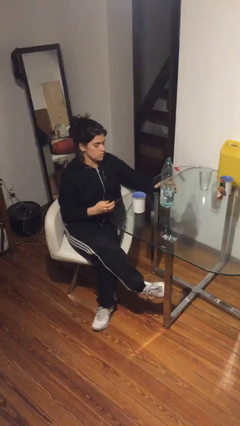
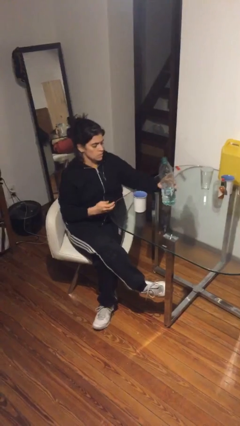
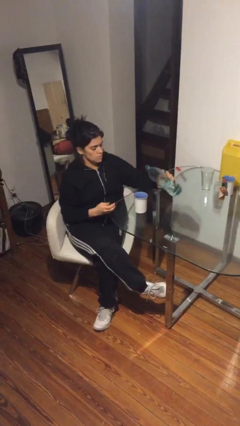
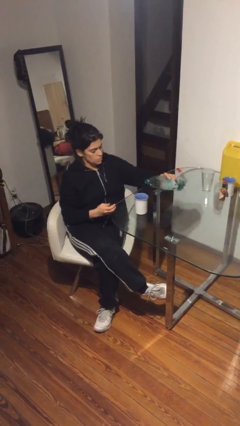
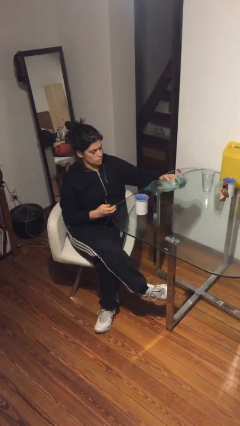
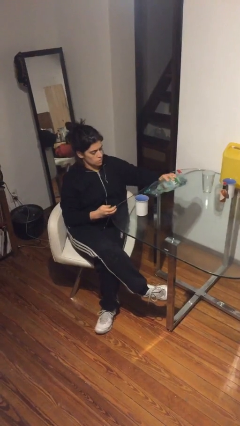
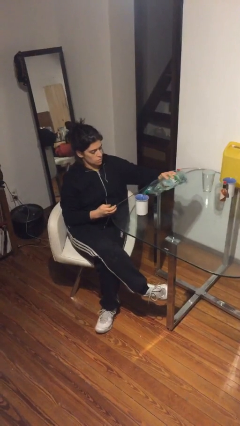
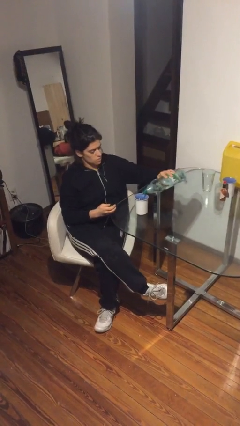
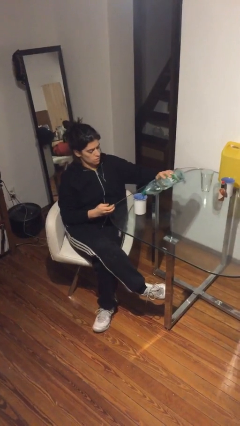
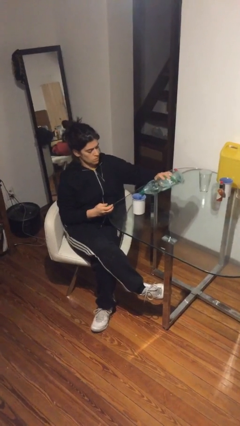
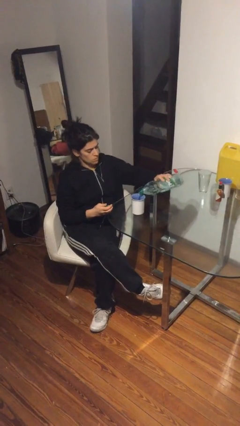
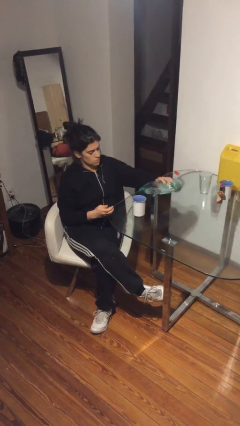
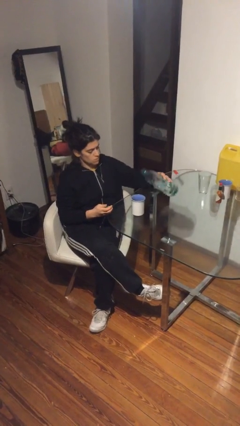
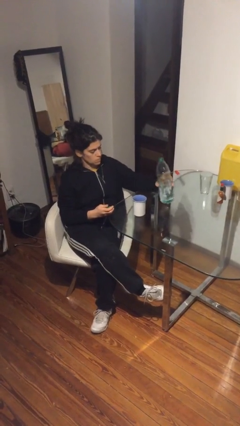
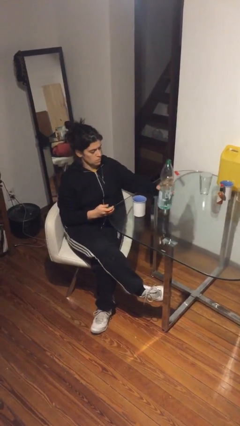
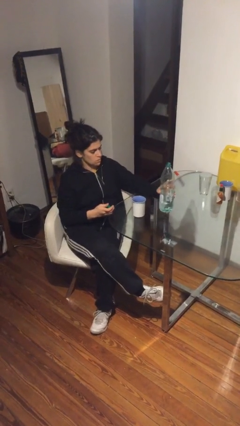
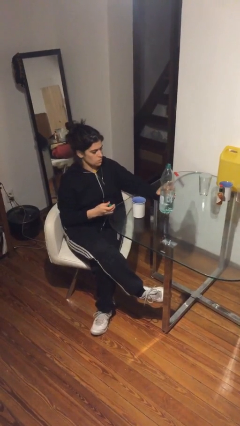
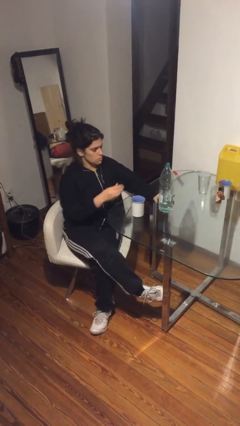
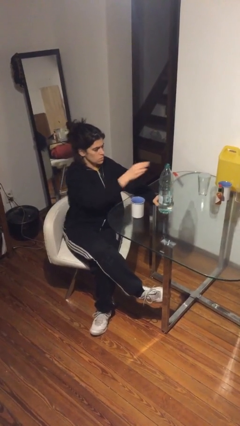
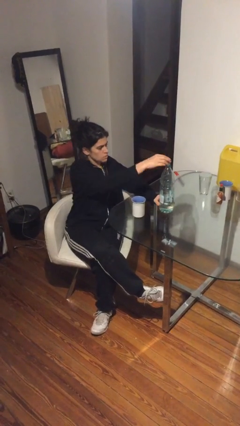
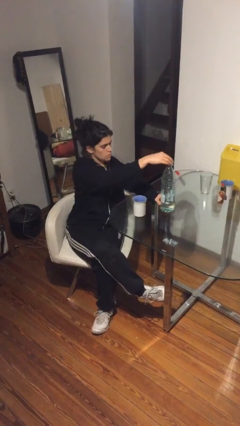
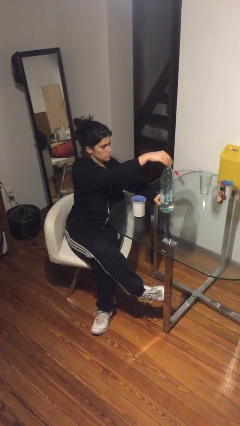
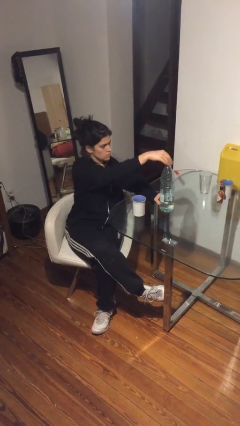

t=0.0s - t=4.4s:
person pours liquid into cup

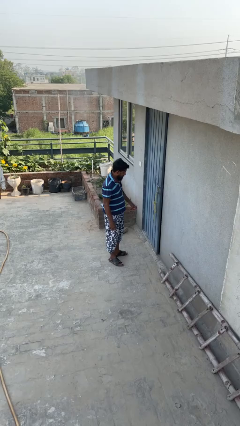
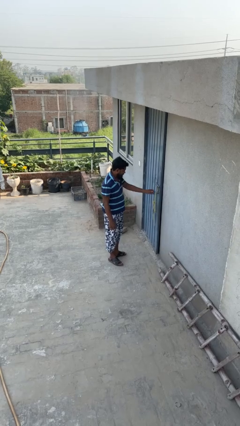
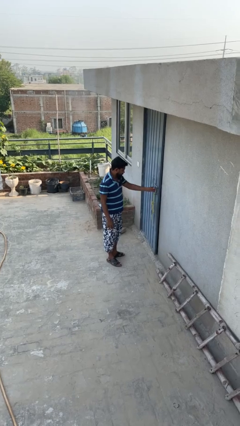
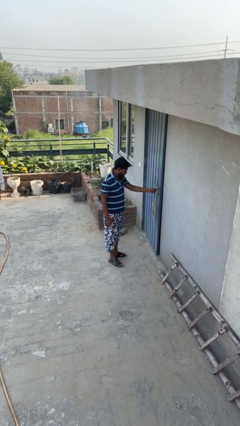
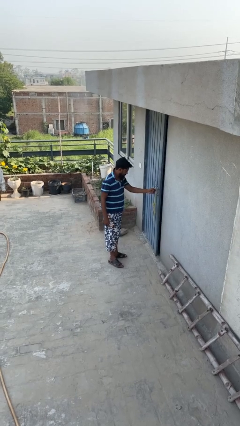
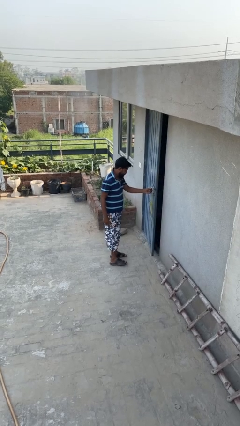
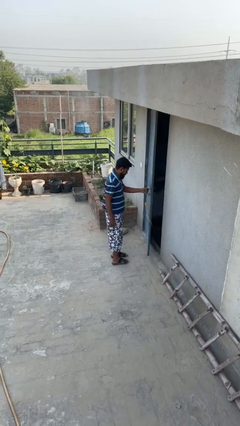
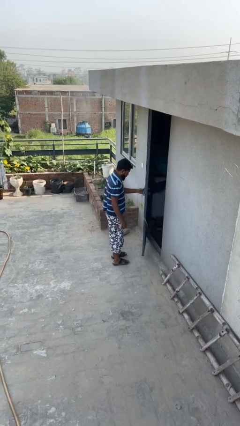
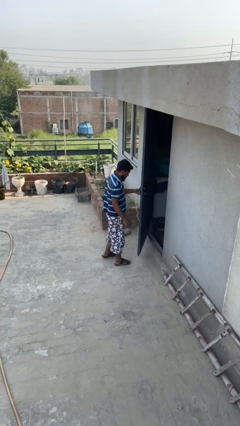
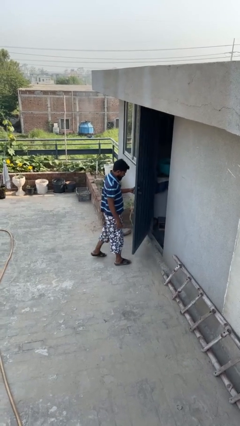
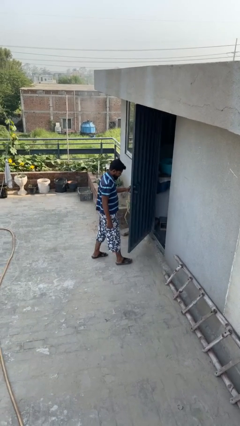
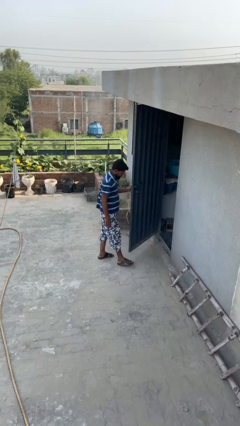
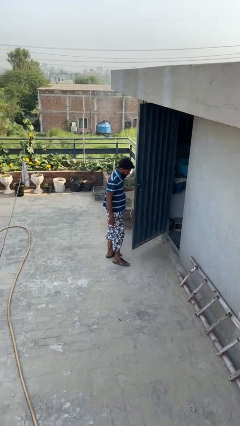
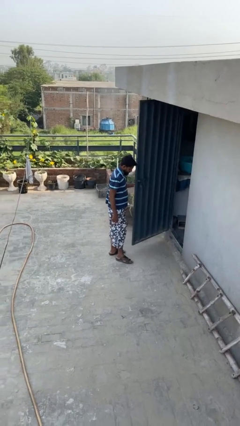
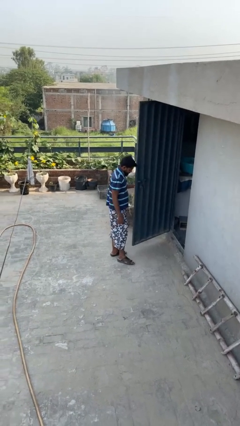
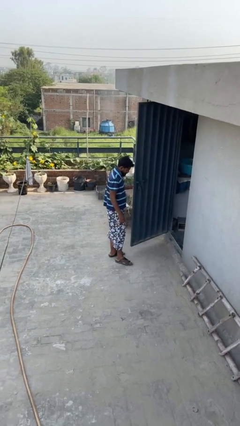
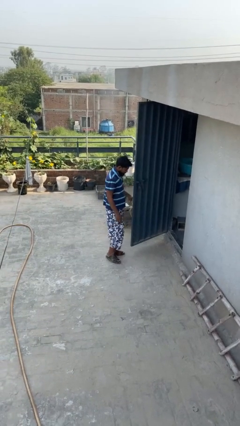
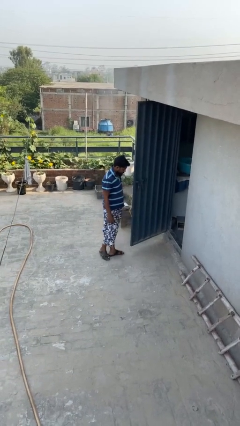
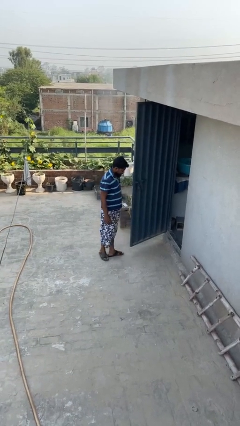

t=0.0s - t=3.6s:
person opens facility door

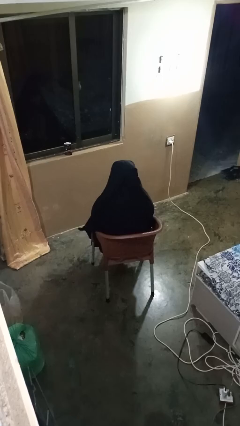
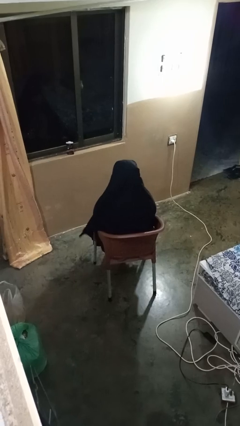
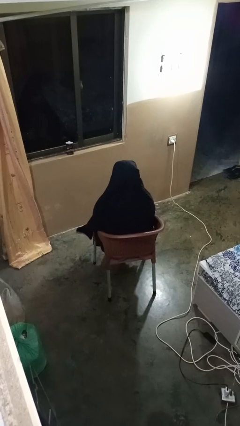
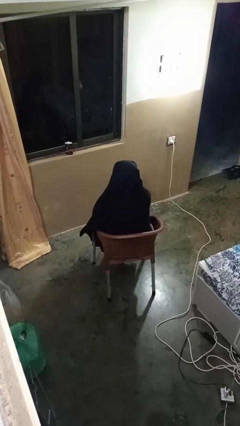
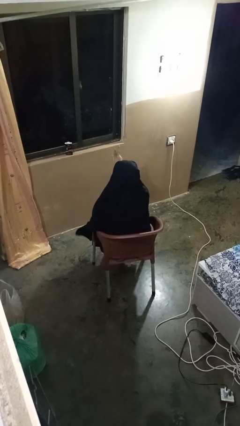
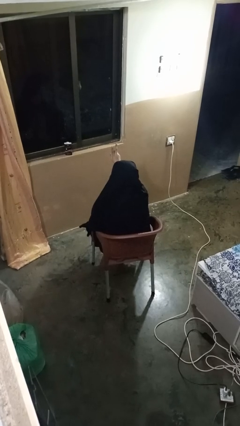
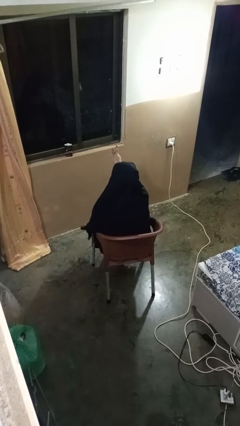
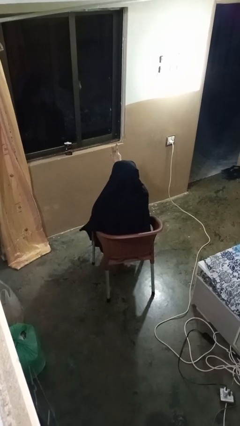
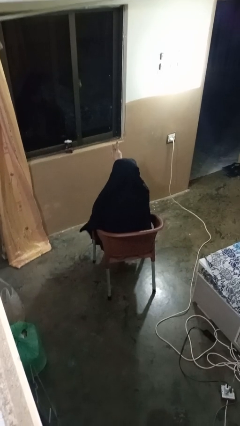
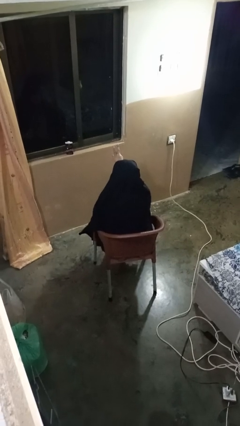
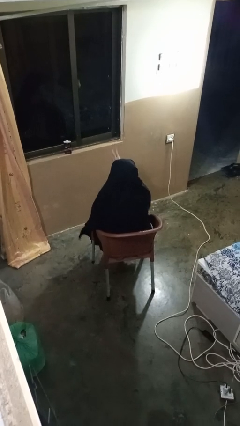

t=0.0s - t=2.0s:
person gestures peace

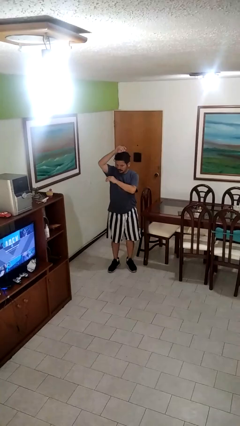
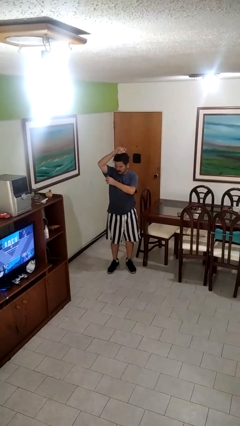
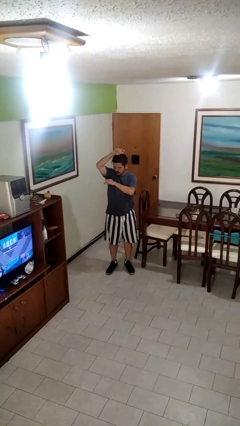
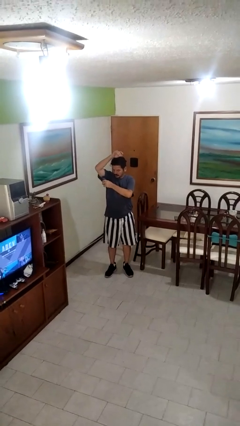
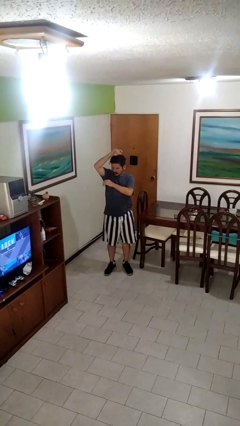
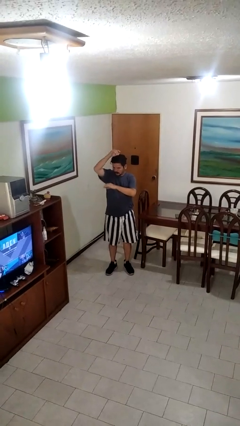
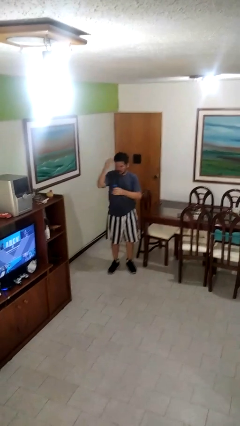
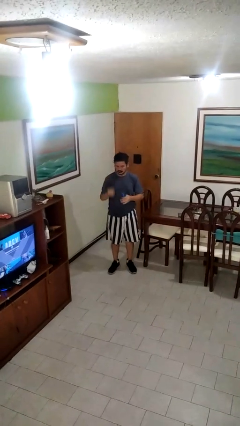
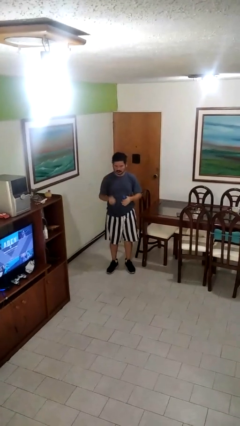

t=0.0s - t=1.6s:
person applies deodorant

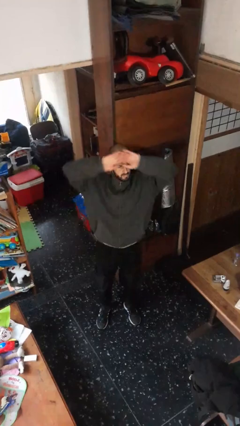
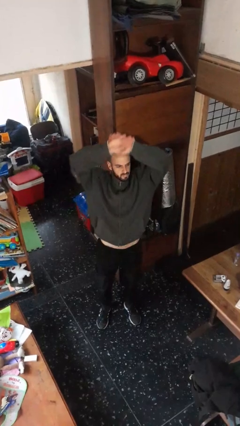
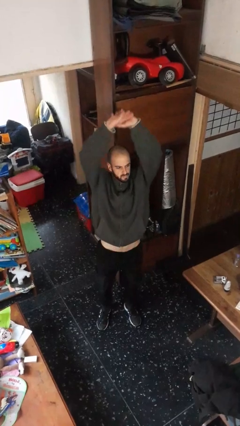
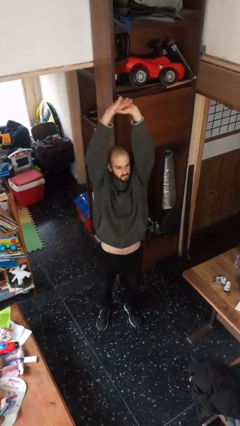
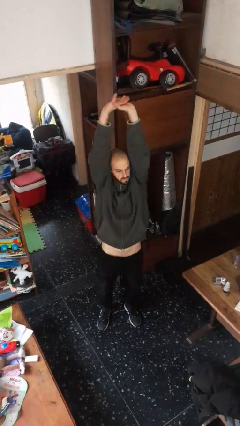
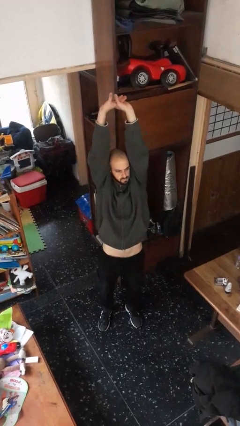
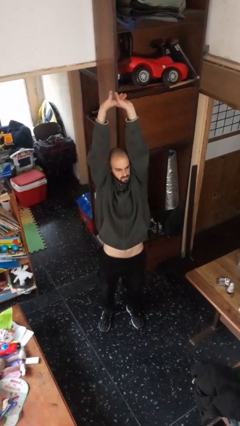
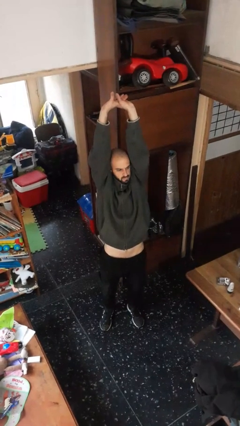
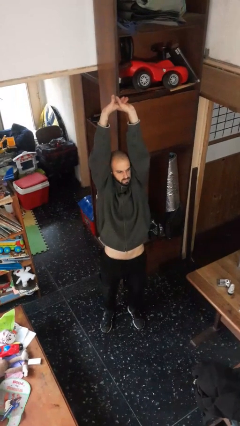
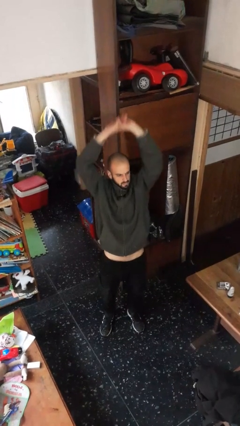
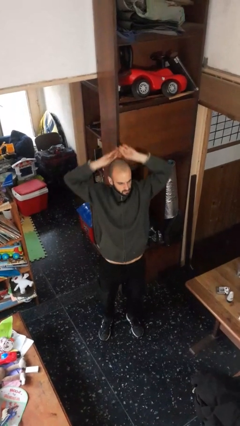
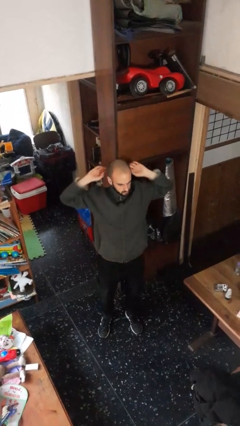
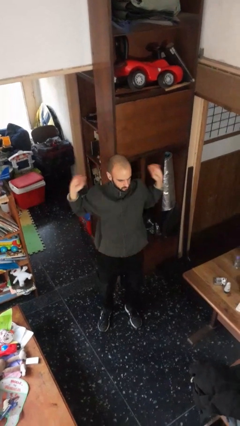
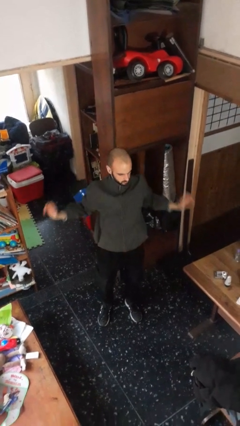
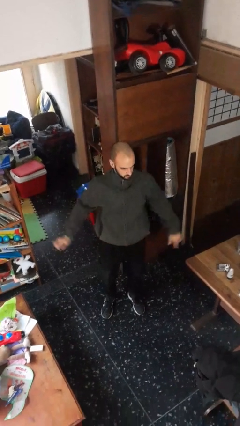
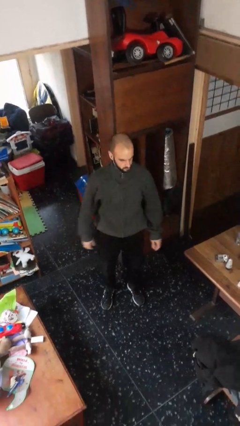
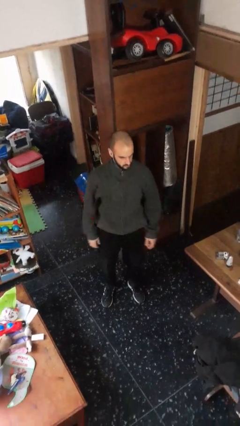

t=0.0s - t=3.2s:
person stretches arms over head

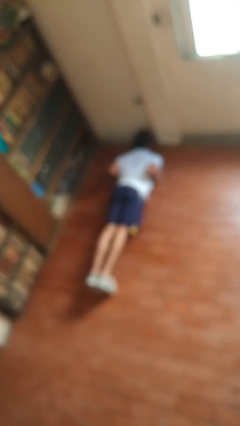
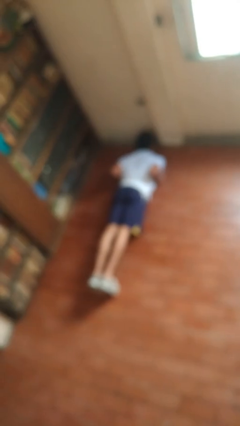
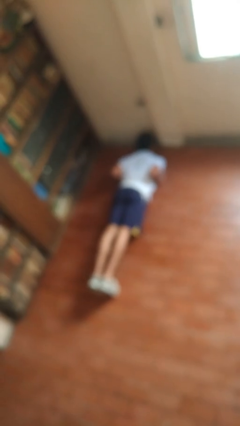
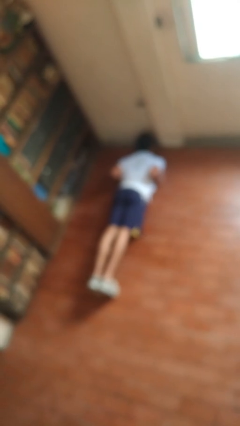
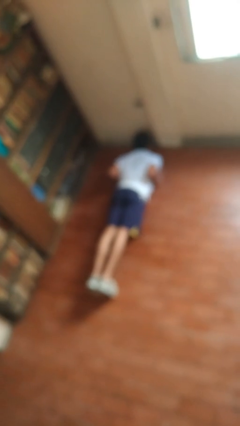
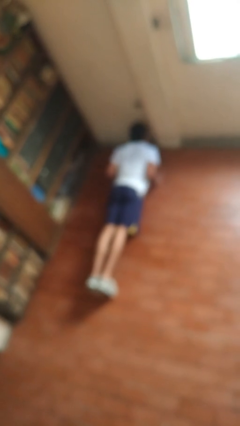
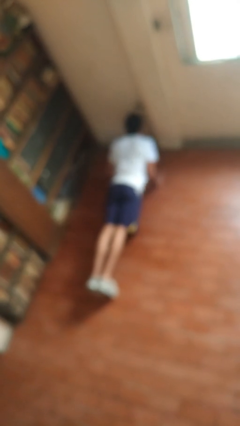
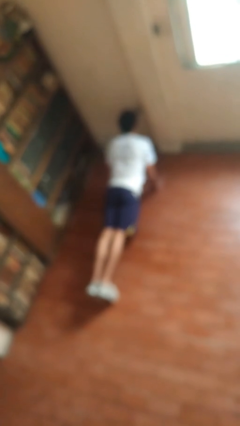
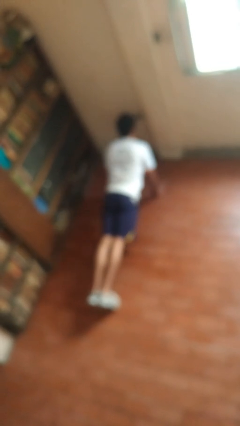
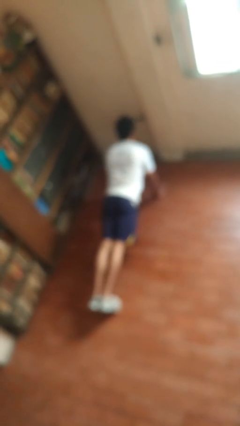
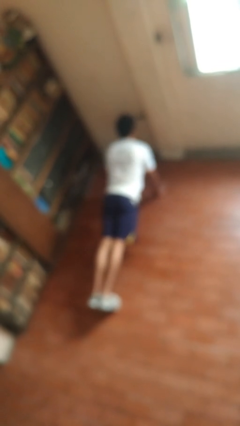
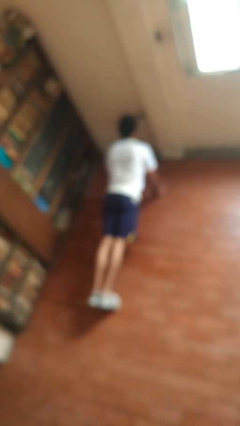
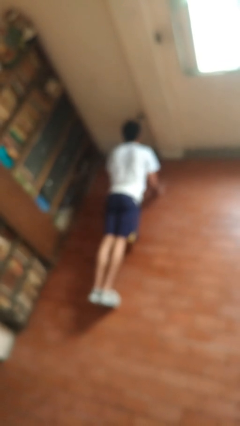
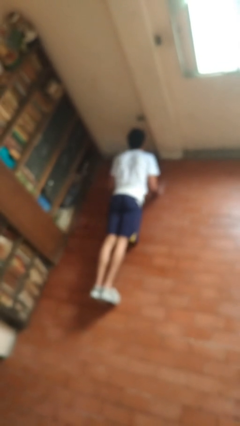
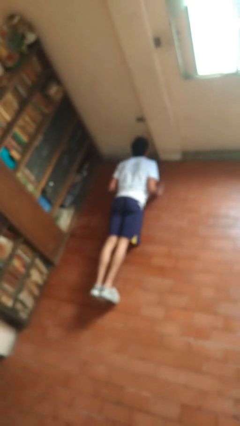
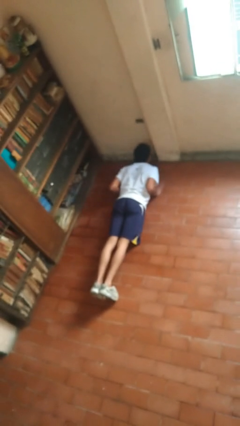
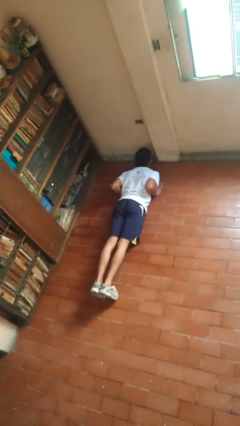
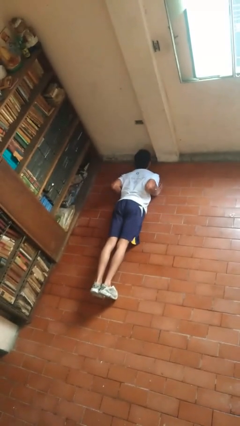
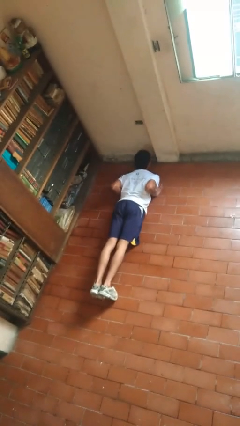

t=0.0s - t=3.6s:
person exercises with pushup
